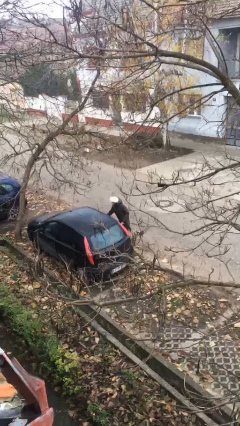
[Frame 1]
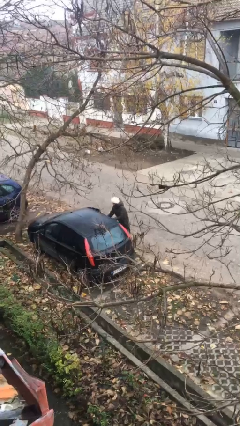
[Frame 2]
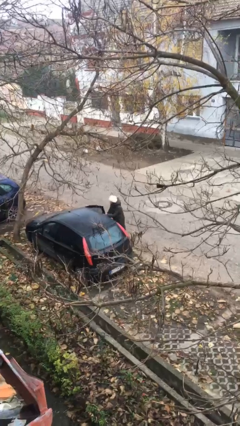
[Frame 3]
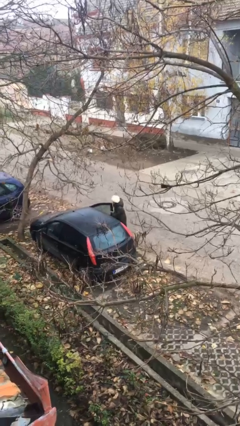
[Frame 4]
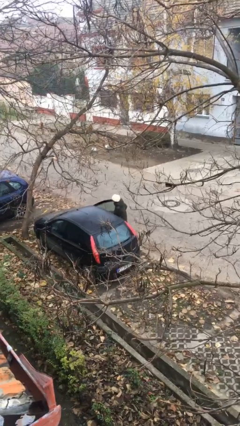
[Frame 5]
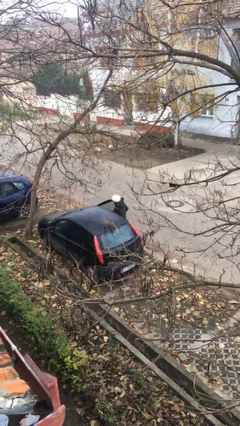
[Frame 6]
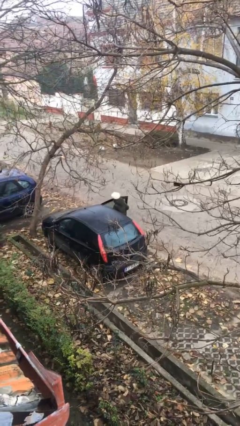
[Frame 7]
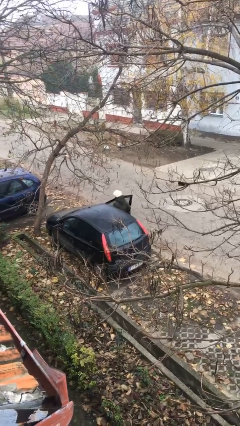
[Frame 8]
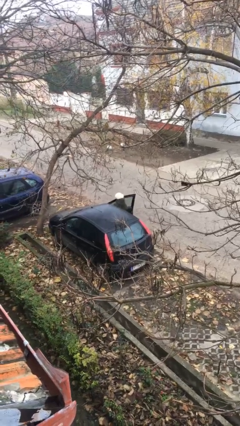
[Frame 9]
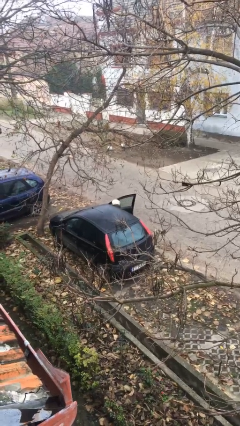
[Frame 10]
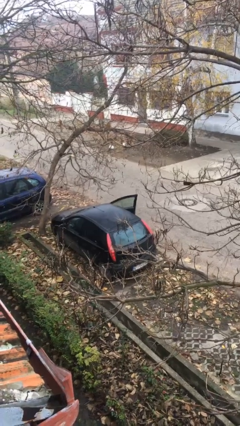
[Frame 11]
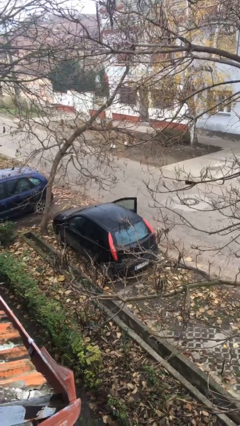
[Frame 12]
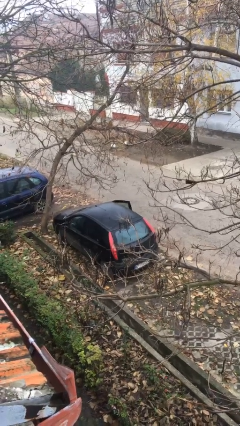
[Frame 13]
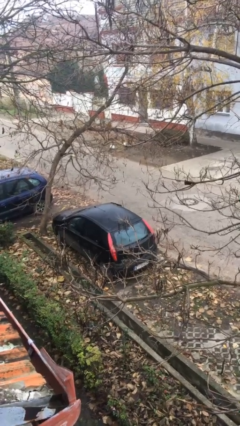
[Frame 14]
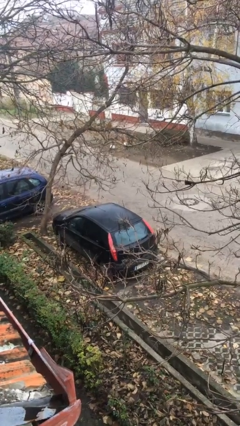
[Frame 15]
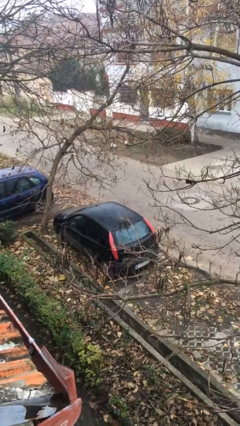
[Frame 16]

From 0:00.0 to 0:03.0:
person enters car

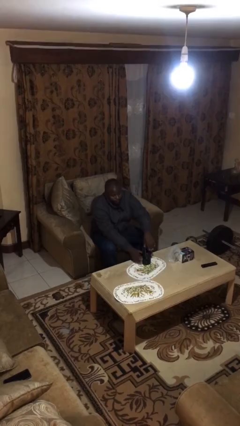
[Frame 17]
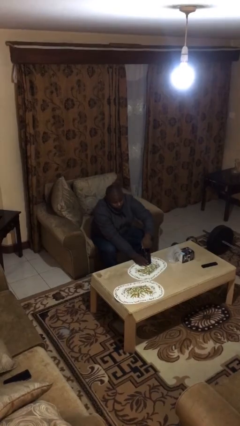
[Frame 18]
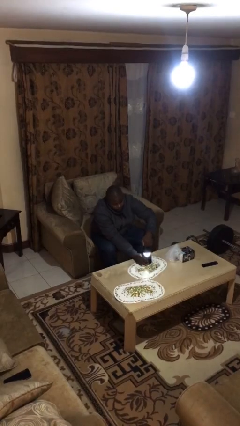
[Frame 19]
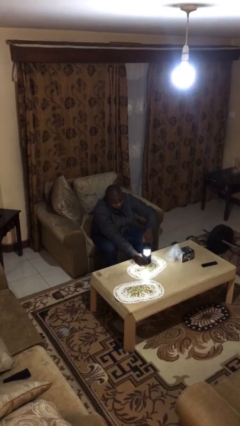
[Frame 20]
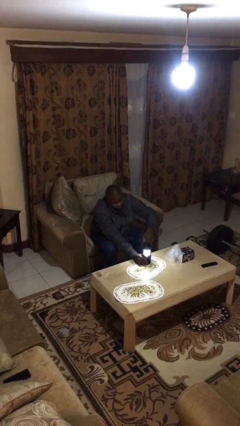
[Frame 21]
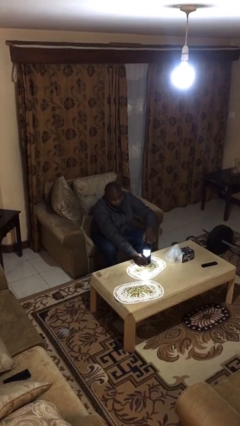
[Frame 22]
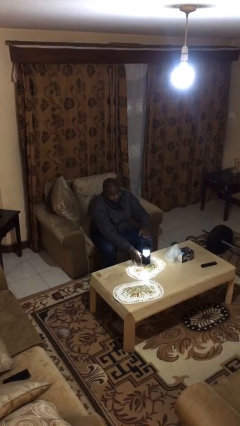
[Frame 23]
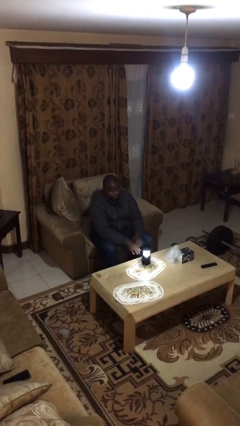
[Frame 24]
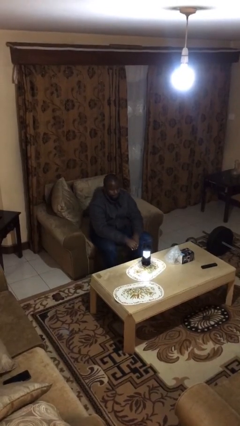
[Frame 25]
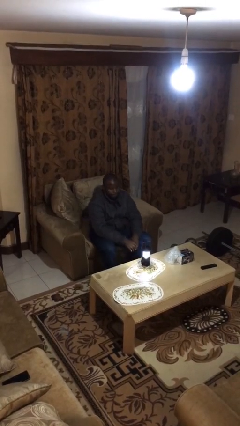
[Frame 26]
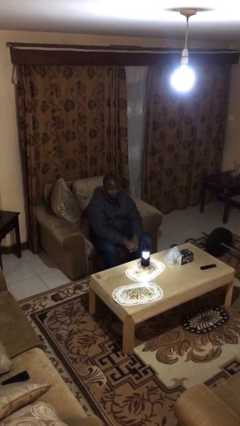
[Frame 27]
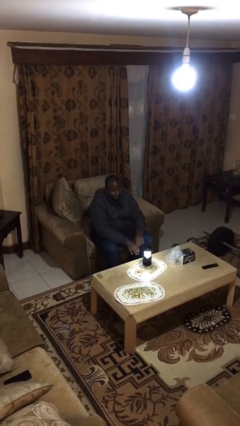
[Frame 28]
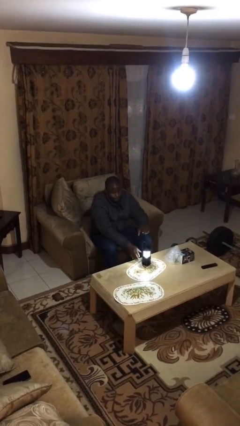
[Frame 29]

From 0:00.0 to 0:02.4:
person turns on lamp

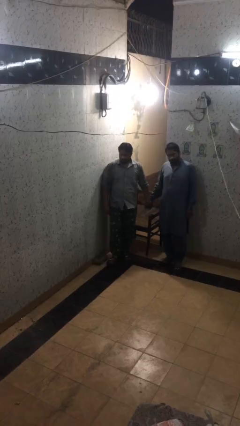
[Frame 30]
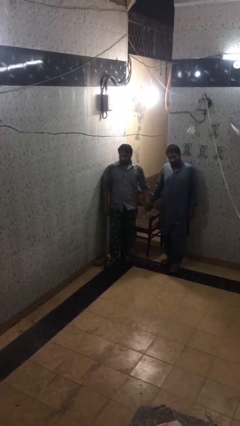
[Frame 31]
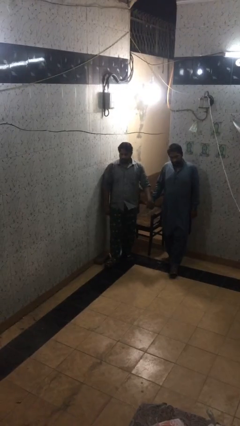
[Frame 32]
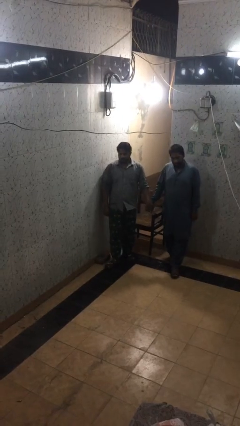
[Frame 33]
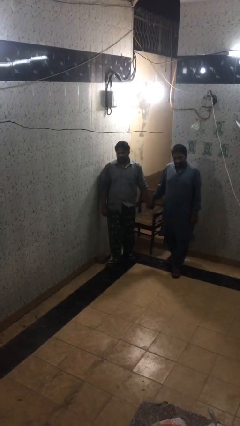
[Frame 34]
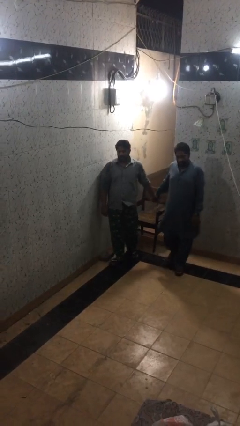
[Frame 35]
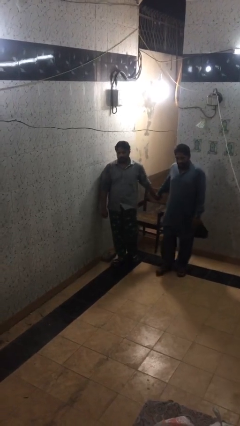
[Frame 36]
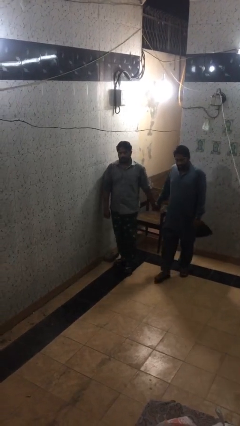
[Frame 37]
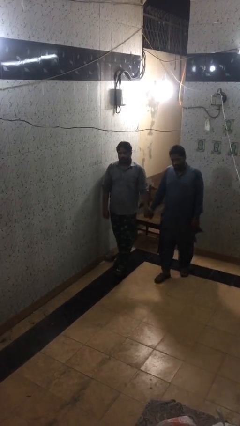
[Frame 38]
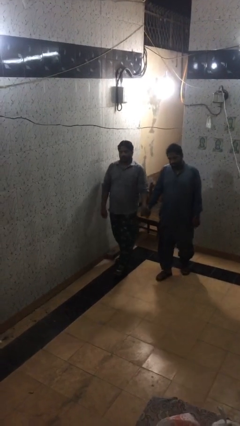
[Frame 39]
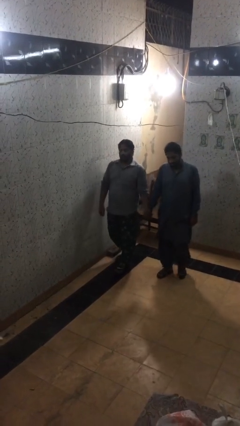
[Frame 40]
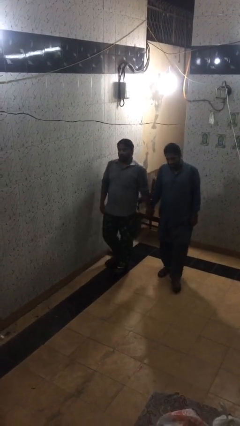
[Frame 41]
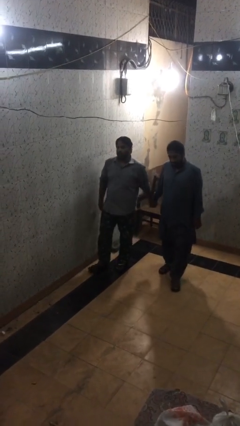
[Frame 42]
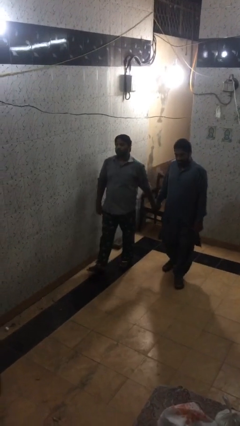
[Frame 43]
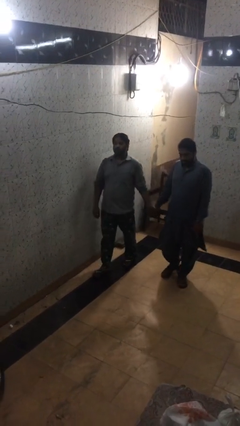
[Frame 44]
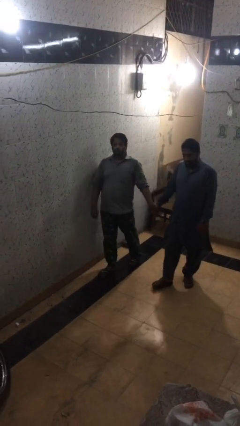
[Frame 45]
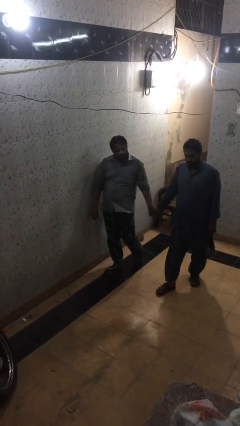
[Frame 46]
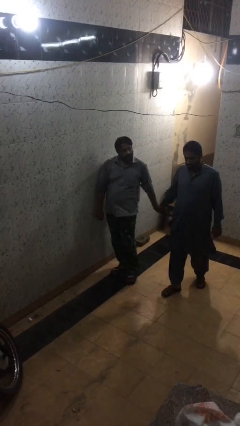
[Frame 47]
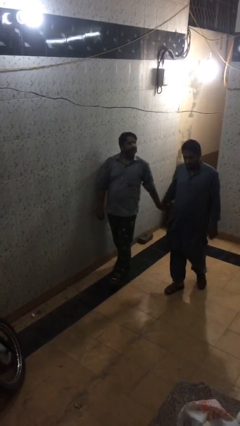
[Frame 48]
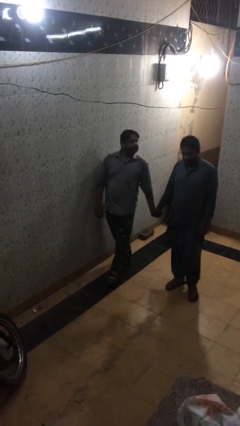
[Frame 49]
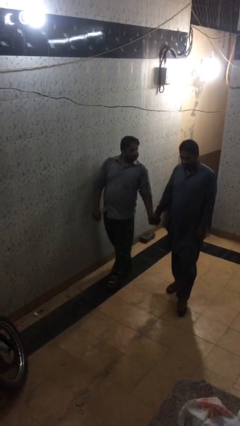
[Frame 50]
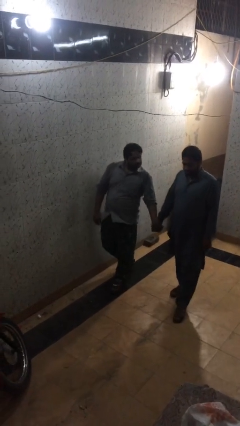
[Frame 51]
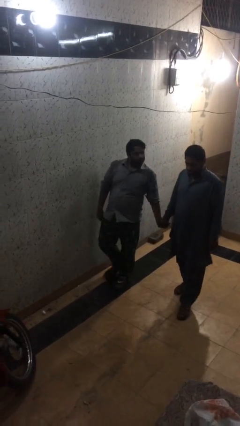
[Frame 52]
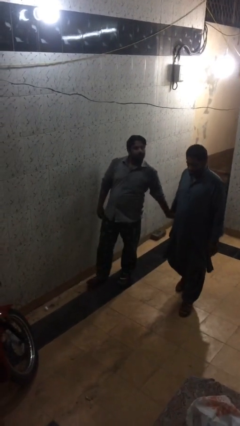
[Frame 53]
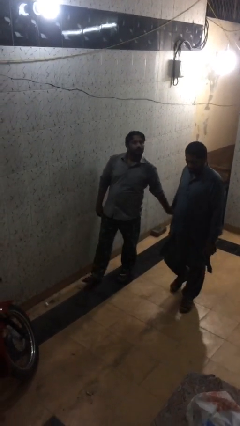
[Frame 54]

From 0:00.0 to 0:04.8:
person holds hand

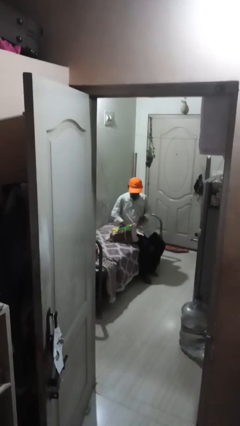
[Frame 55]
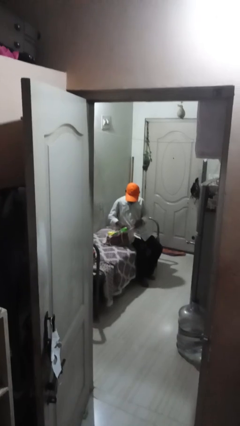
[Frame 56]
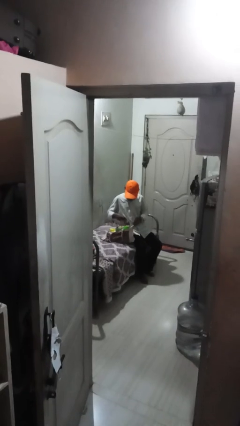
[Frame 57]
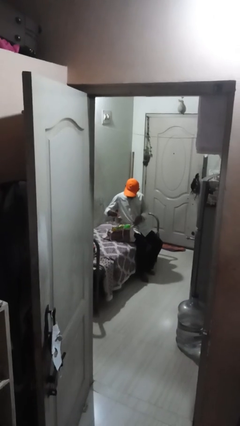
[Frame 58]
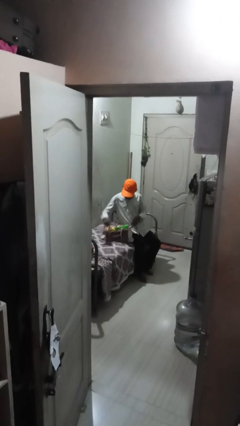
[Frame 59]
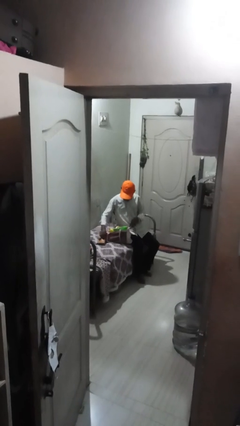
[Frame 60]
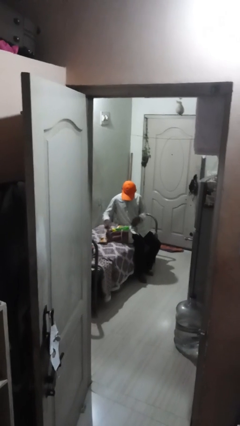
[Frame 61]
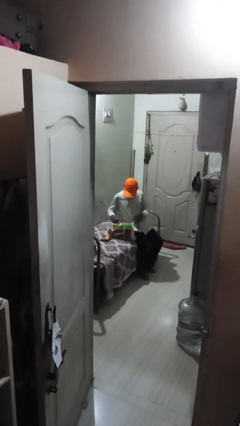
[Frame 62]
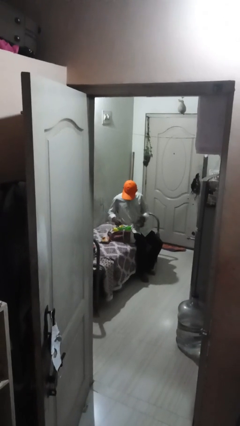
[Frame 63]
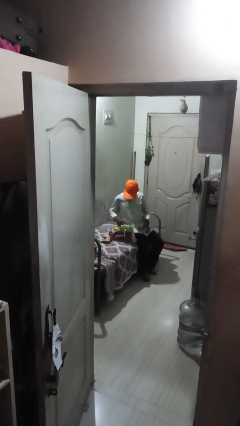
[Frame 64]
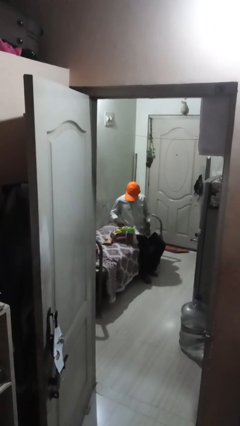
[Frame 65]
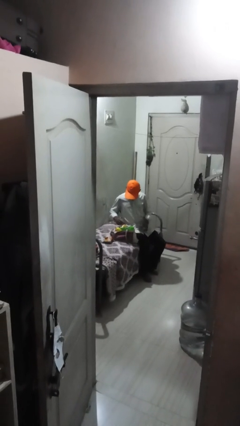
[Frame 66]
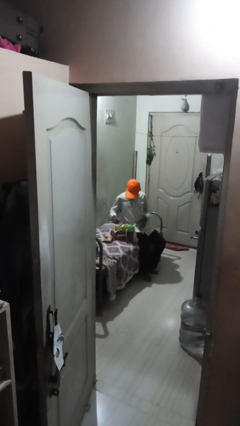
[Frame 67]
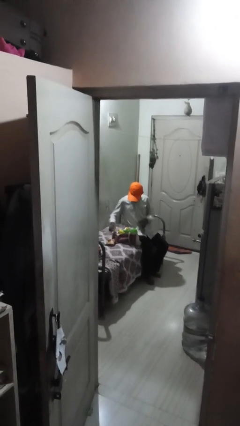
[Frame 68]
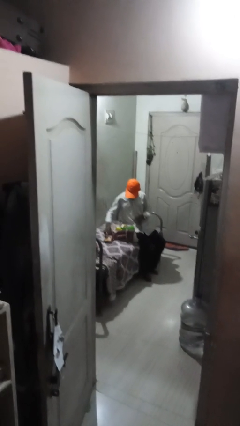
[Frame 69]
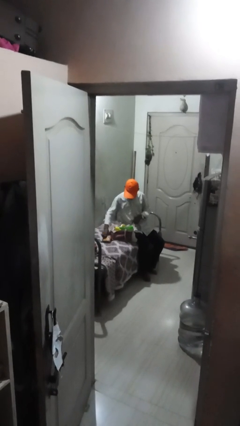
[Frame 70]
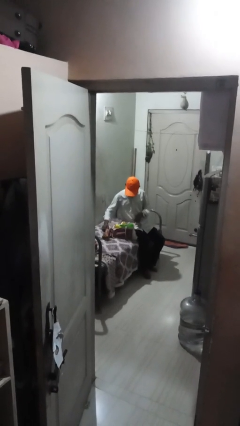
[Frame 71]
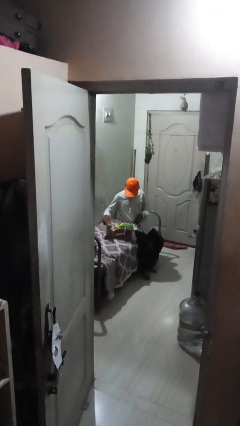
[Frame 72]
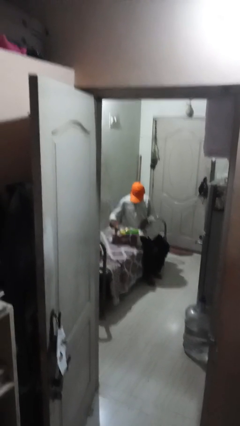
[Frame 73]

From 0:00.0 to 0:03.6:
person takes object from bag

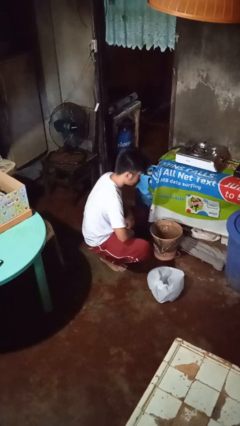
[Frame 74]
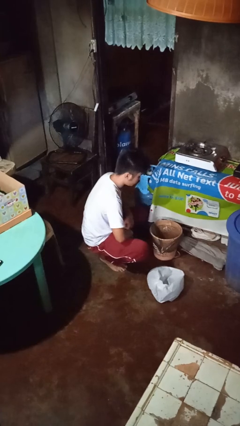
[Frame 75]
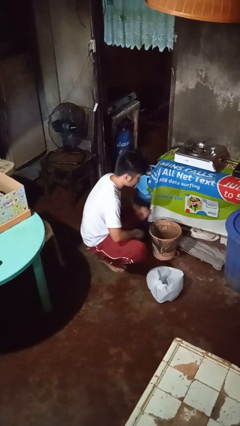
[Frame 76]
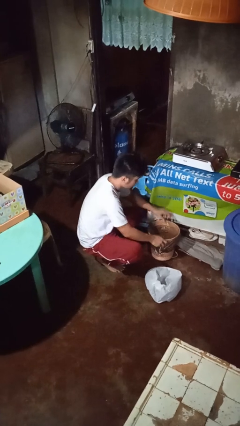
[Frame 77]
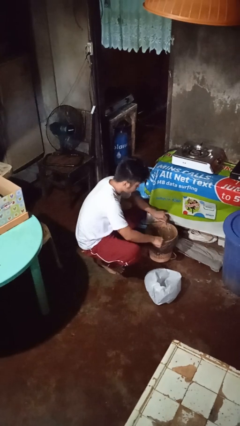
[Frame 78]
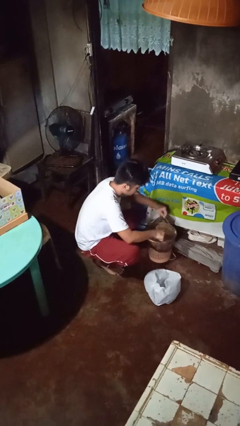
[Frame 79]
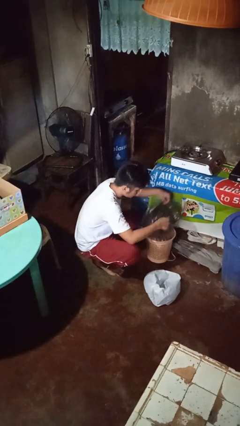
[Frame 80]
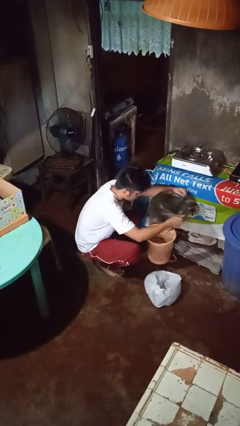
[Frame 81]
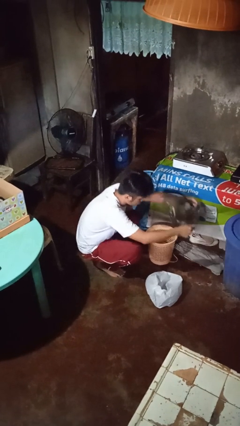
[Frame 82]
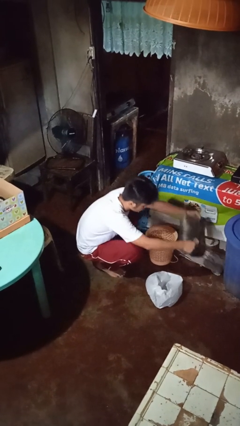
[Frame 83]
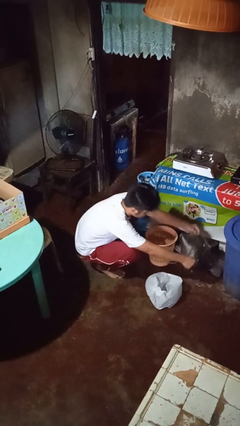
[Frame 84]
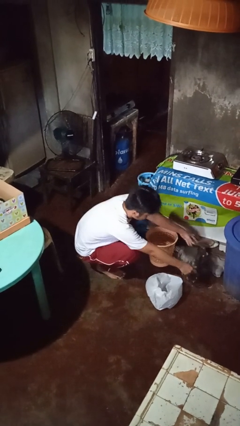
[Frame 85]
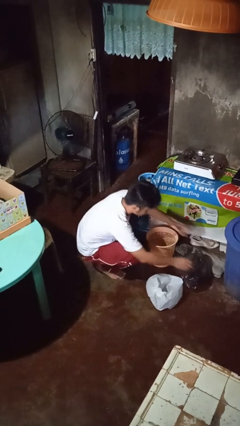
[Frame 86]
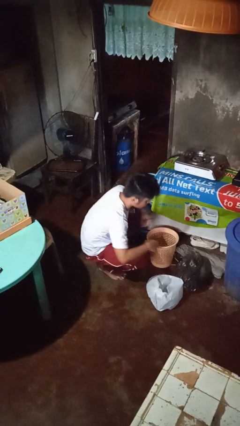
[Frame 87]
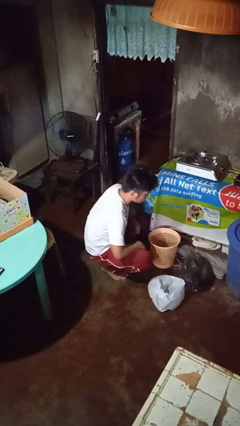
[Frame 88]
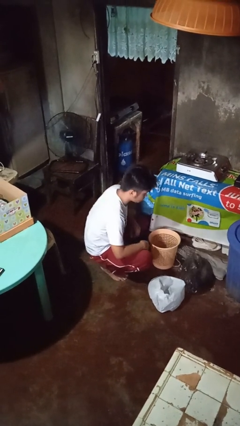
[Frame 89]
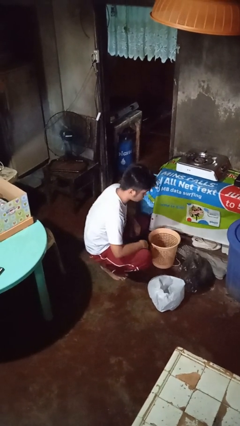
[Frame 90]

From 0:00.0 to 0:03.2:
person removes trashbag from trashcan

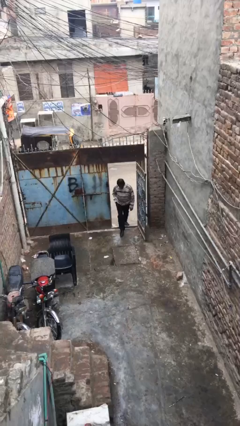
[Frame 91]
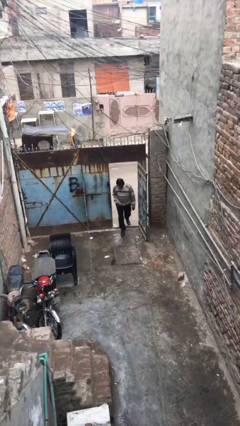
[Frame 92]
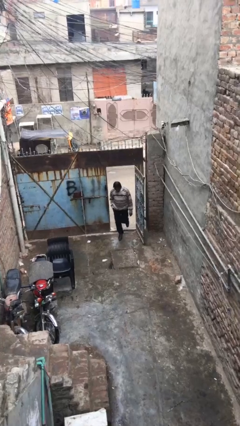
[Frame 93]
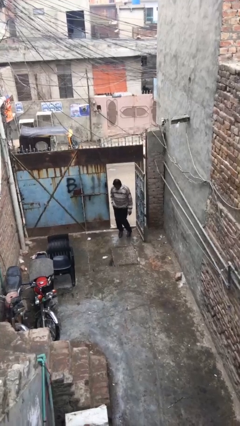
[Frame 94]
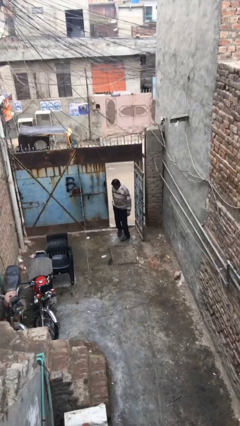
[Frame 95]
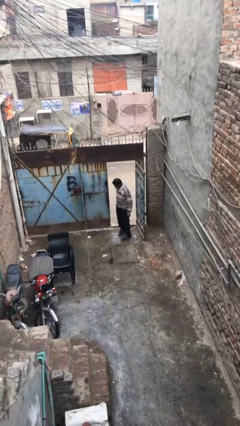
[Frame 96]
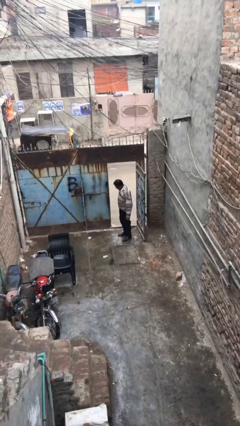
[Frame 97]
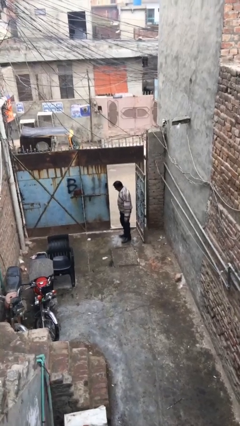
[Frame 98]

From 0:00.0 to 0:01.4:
person enters scene through structure
